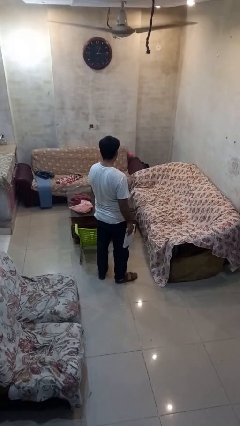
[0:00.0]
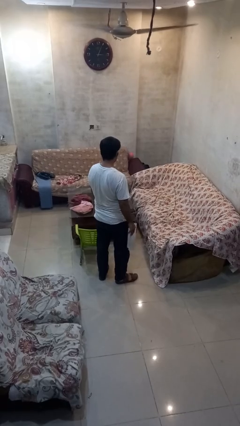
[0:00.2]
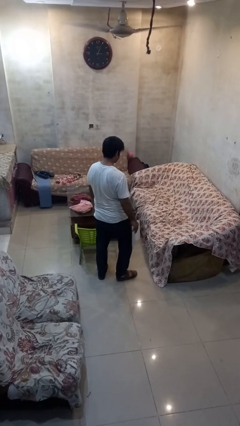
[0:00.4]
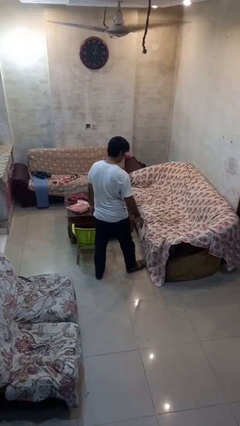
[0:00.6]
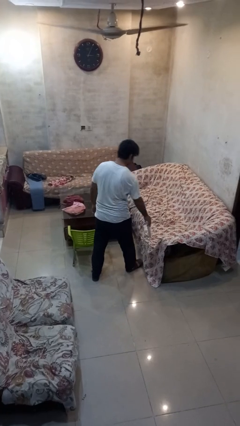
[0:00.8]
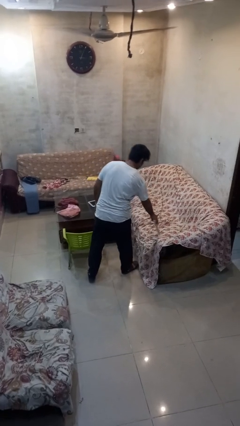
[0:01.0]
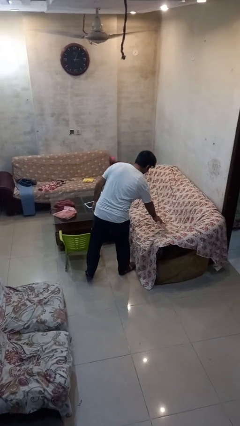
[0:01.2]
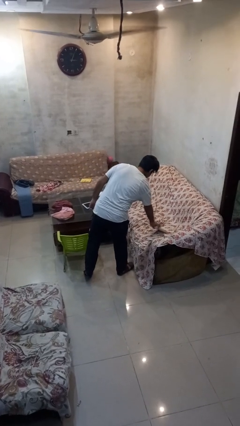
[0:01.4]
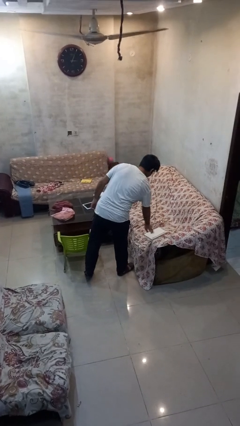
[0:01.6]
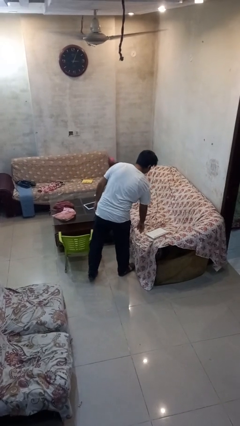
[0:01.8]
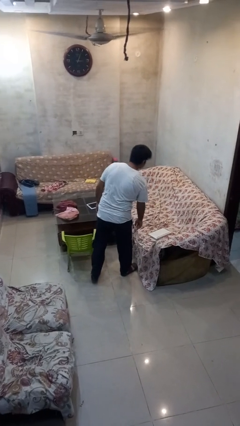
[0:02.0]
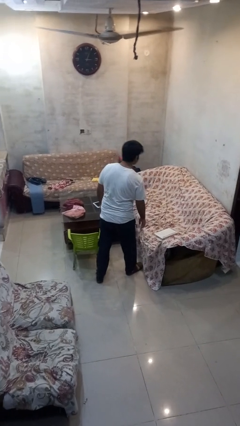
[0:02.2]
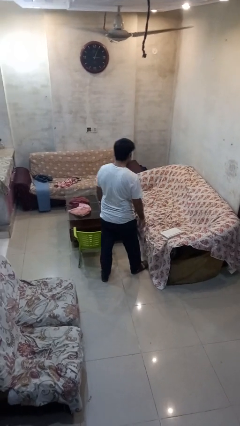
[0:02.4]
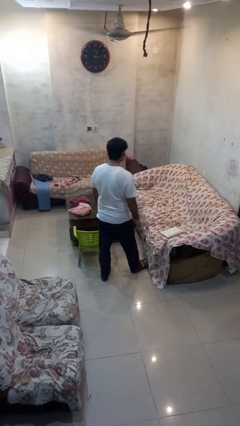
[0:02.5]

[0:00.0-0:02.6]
person puts down object on couch

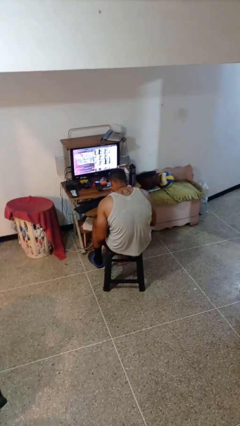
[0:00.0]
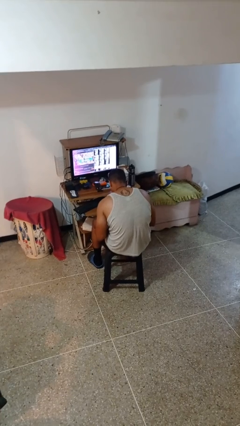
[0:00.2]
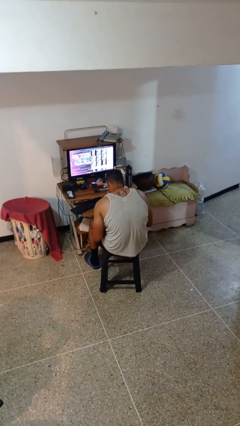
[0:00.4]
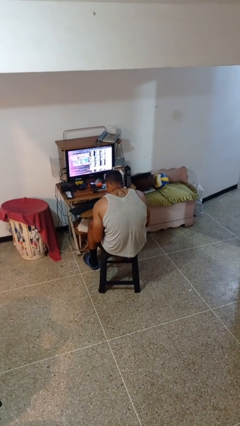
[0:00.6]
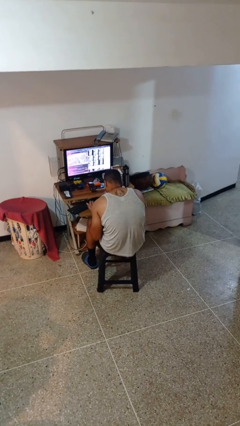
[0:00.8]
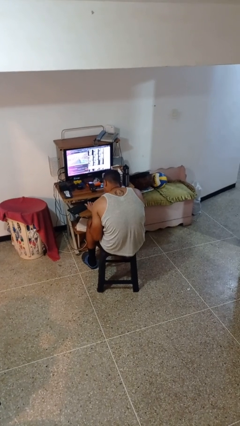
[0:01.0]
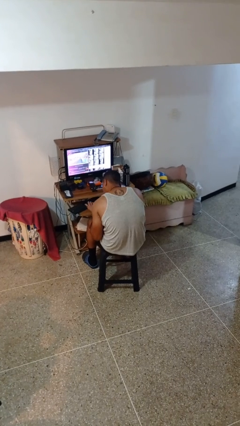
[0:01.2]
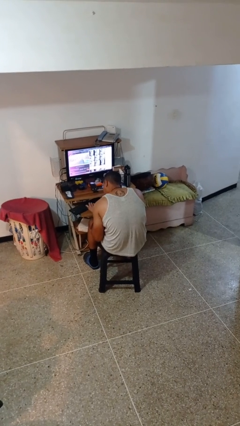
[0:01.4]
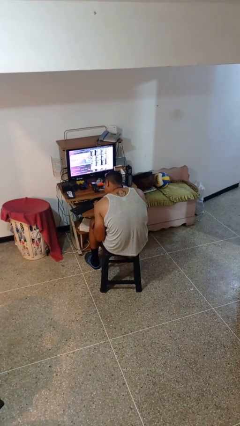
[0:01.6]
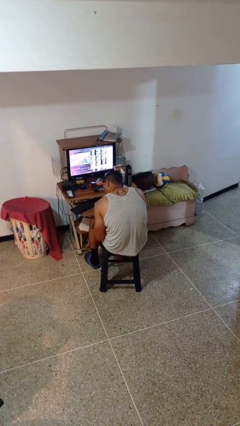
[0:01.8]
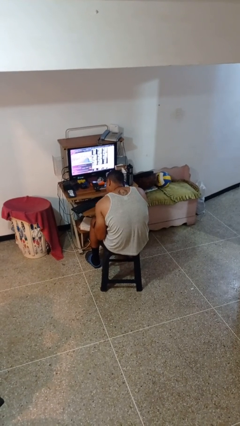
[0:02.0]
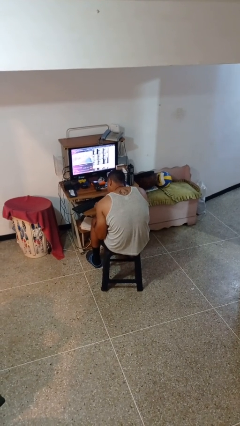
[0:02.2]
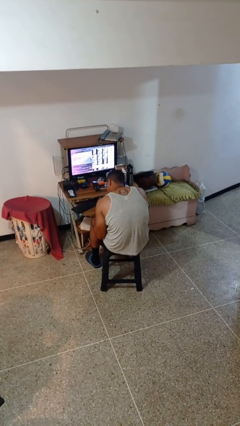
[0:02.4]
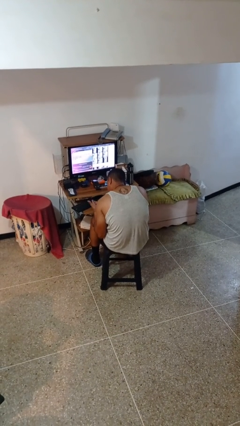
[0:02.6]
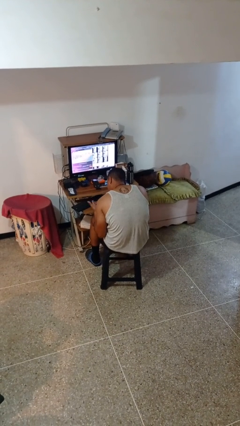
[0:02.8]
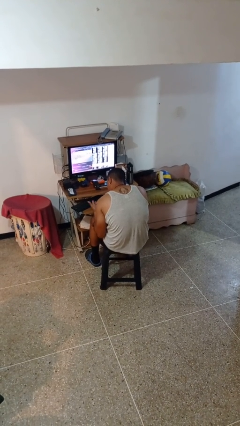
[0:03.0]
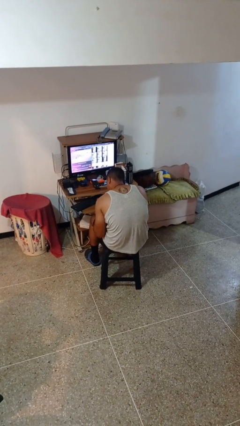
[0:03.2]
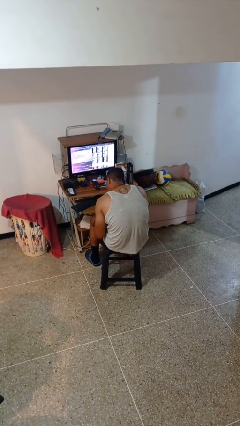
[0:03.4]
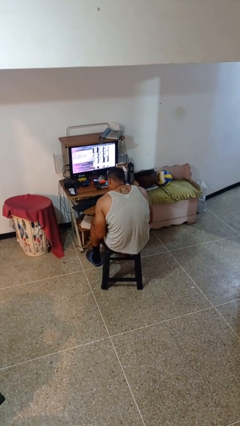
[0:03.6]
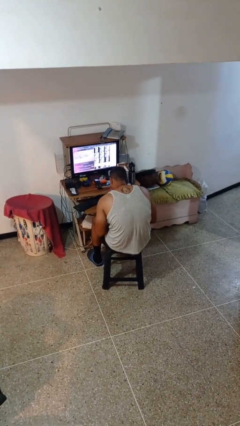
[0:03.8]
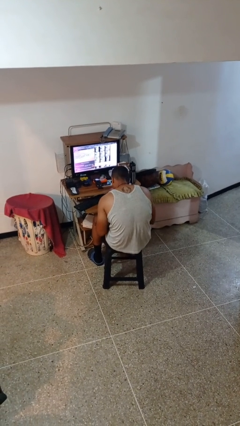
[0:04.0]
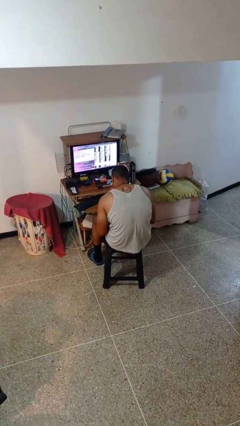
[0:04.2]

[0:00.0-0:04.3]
person looks at hands in lap

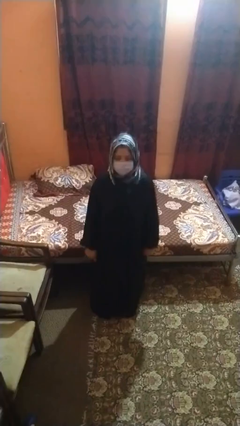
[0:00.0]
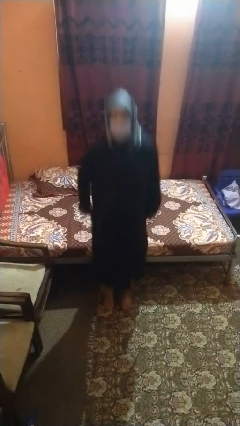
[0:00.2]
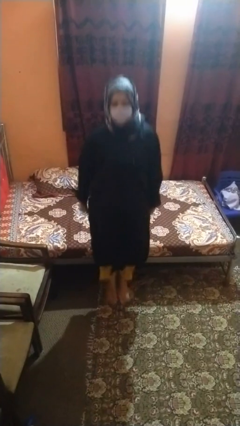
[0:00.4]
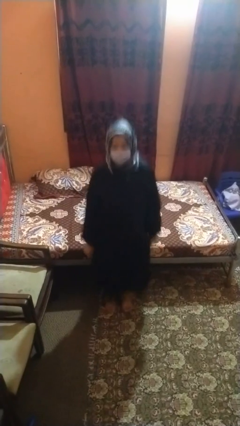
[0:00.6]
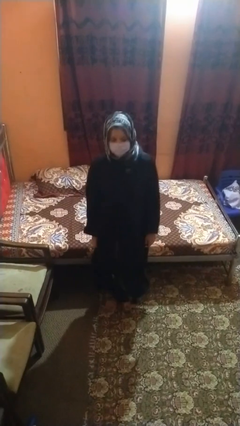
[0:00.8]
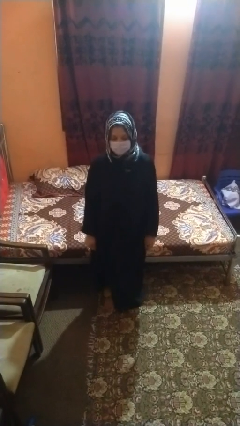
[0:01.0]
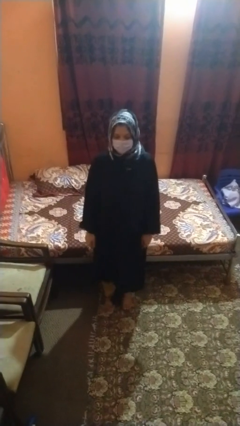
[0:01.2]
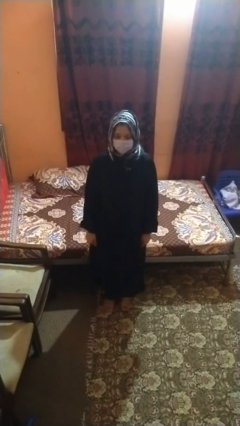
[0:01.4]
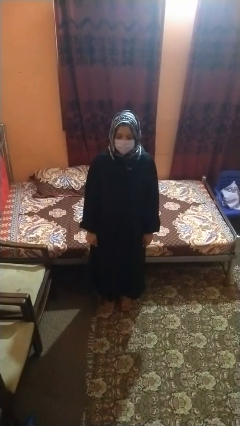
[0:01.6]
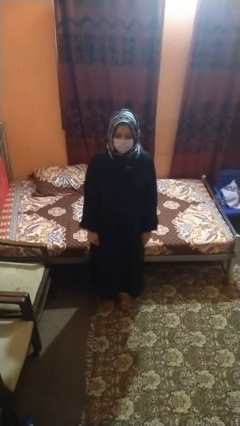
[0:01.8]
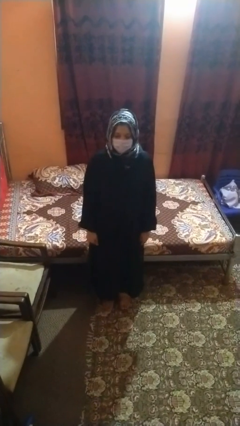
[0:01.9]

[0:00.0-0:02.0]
person jumps

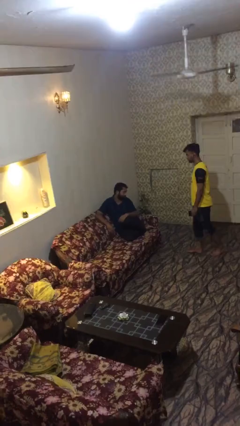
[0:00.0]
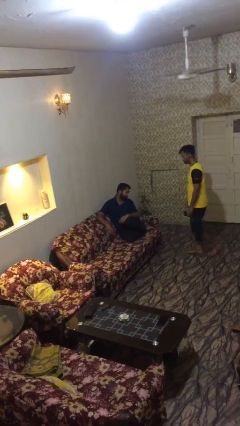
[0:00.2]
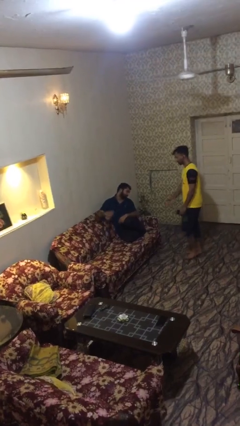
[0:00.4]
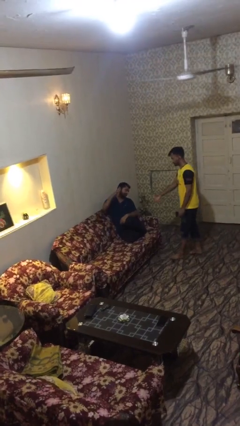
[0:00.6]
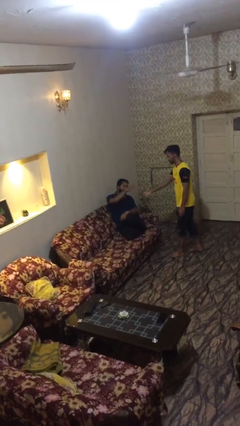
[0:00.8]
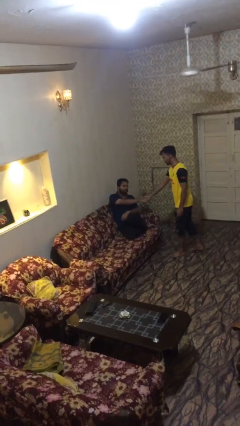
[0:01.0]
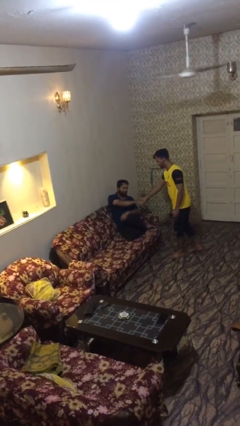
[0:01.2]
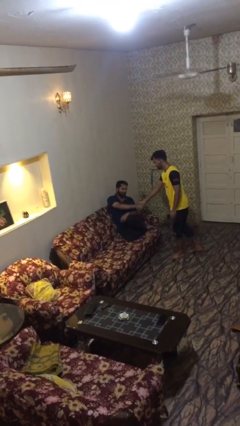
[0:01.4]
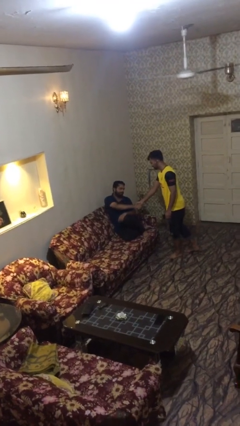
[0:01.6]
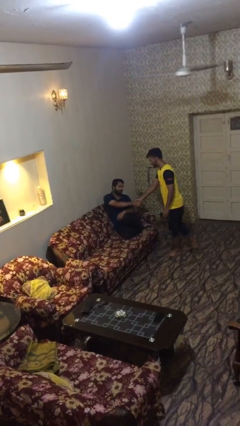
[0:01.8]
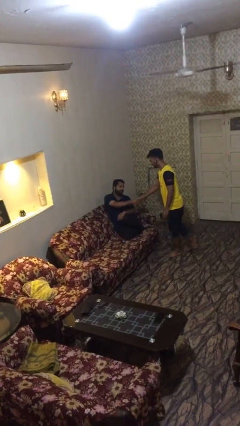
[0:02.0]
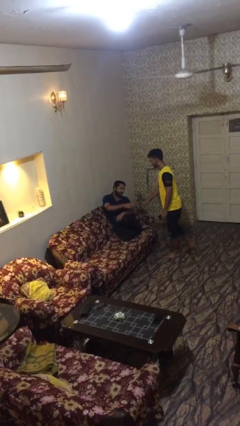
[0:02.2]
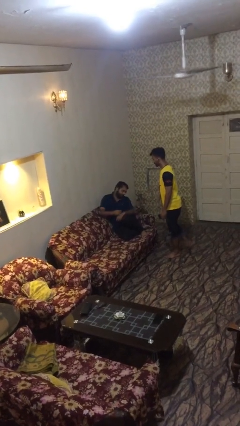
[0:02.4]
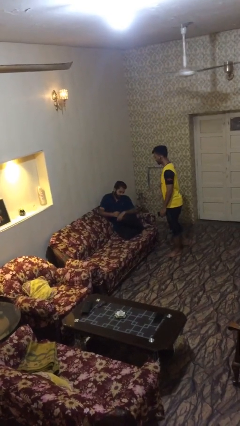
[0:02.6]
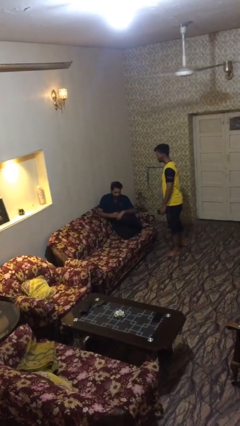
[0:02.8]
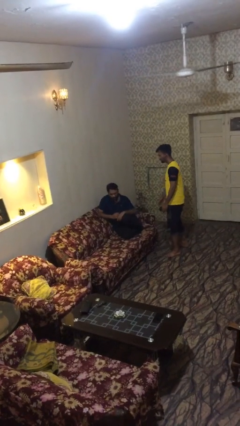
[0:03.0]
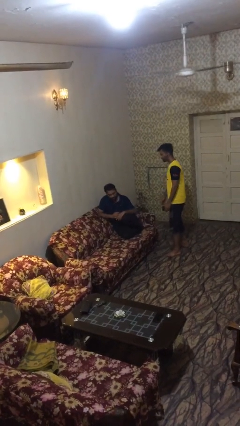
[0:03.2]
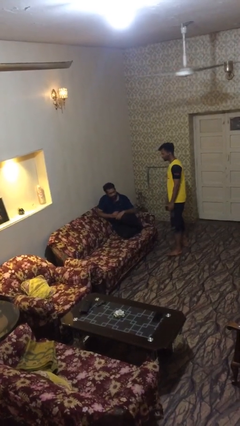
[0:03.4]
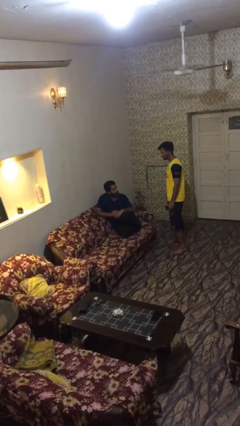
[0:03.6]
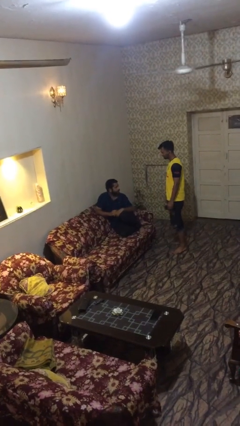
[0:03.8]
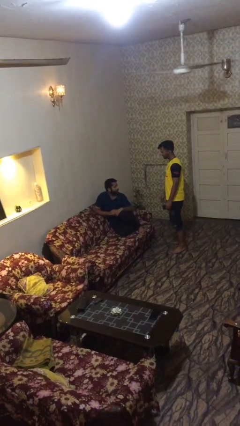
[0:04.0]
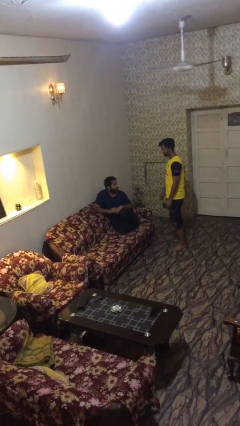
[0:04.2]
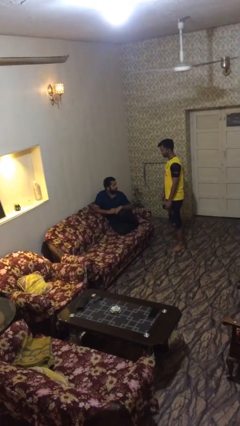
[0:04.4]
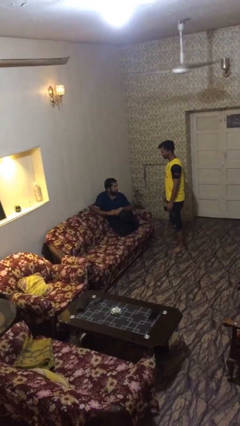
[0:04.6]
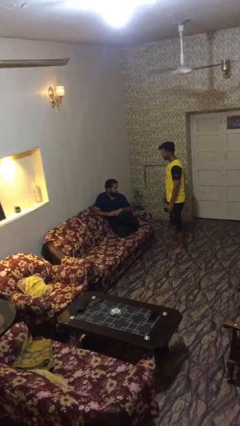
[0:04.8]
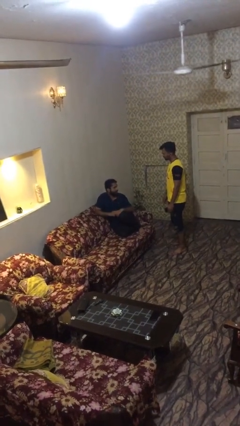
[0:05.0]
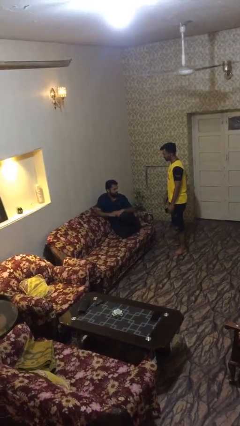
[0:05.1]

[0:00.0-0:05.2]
person shakes hand

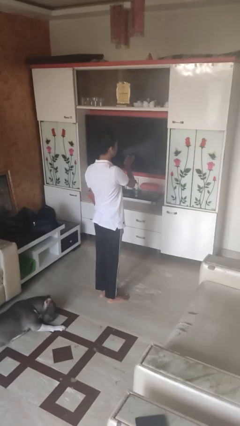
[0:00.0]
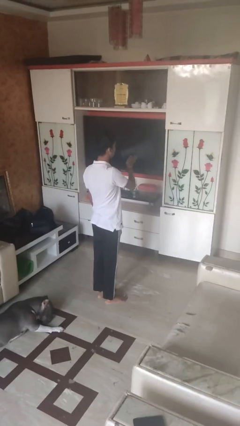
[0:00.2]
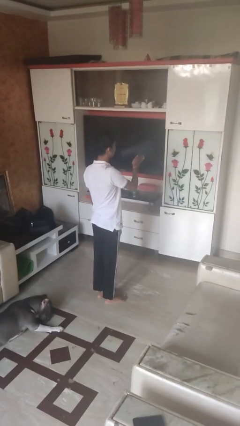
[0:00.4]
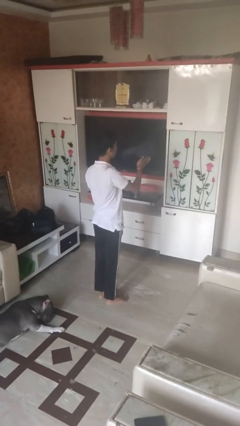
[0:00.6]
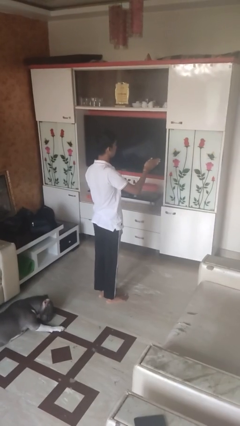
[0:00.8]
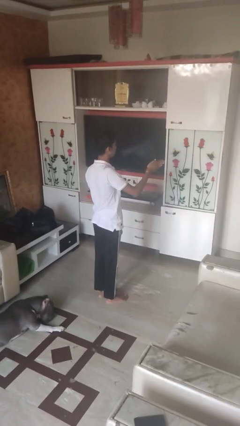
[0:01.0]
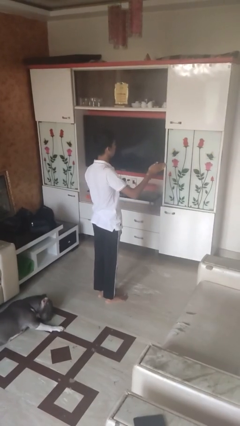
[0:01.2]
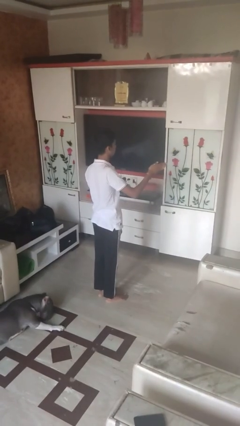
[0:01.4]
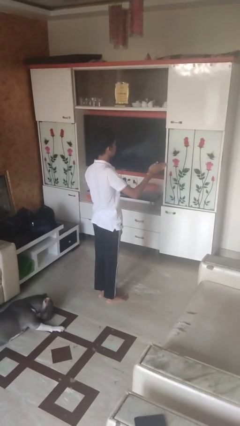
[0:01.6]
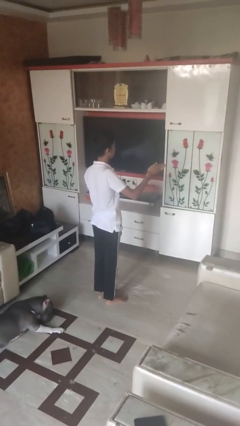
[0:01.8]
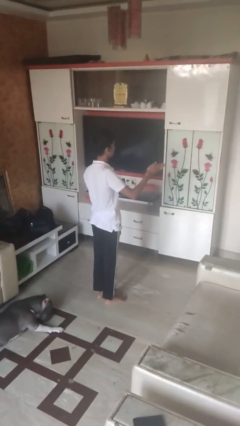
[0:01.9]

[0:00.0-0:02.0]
person gestures swipe right

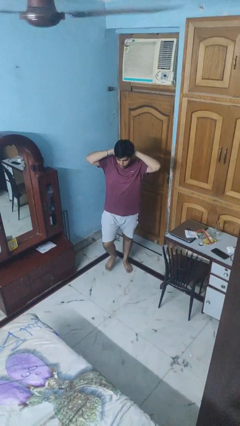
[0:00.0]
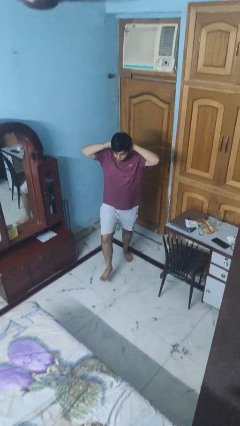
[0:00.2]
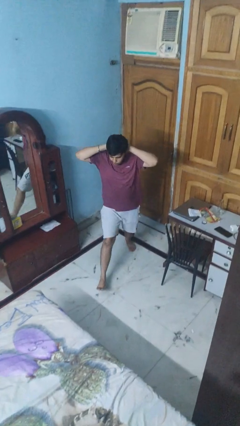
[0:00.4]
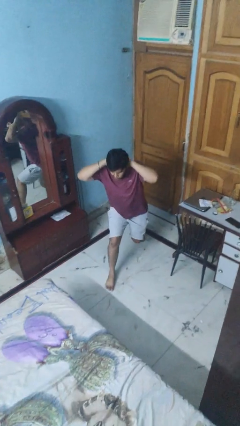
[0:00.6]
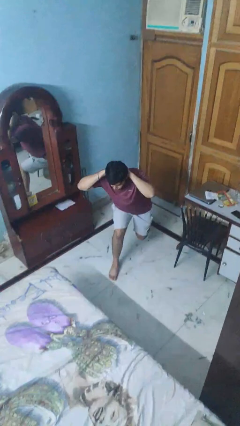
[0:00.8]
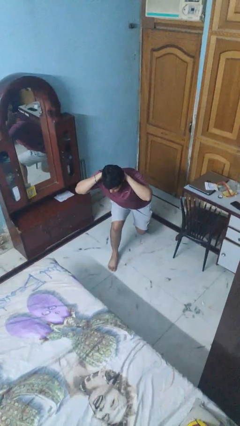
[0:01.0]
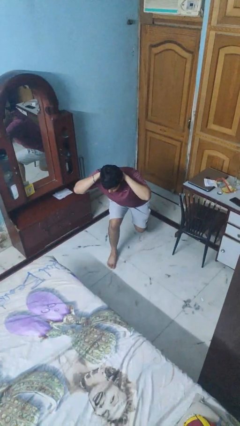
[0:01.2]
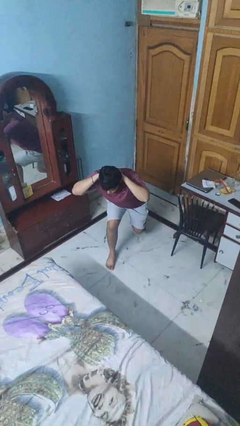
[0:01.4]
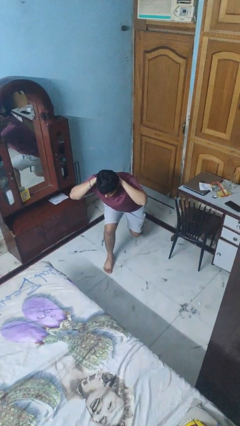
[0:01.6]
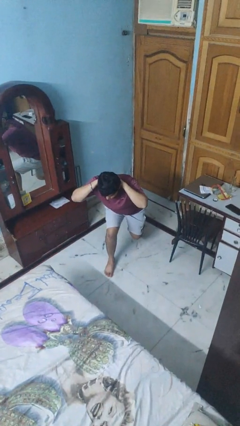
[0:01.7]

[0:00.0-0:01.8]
person exercises with lunges
